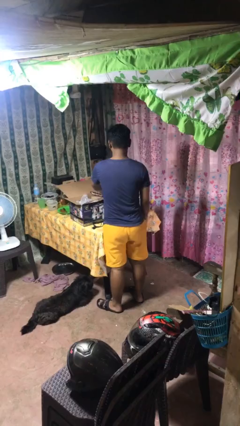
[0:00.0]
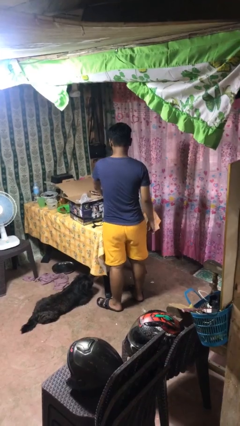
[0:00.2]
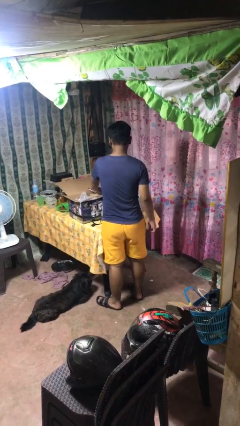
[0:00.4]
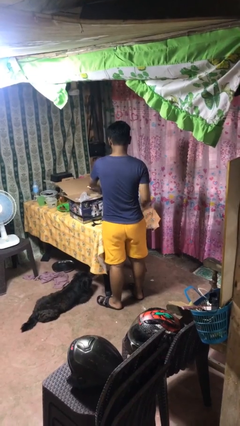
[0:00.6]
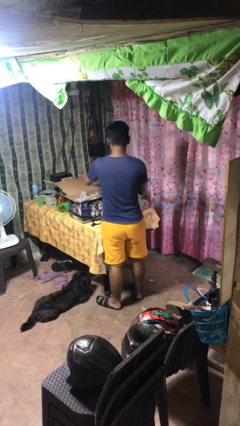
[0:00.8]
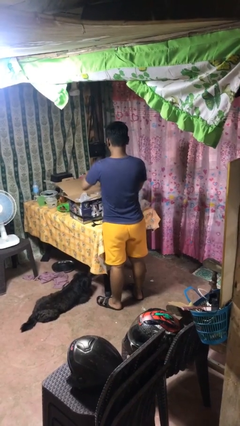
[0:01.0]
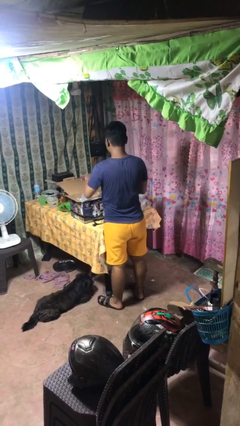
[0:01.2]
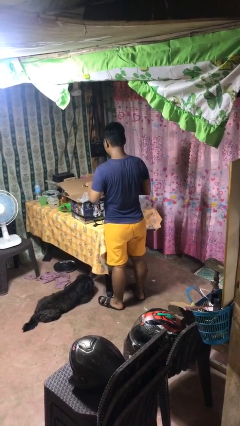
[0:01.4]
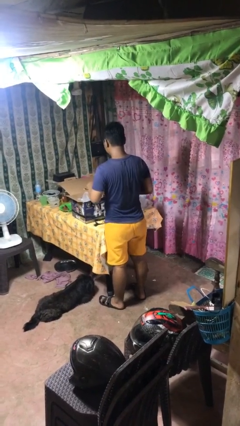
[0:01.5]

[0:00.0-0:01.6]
person takes object from box

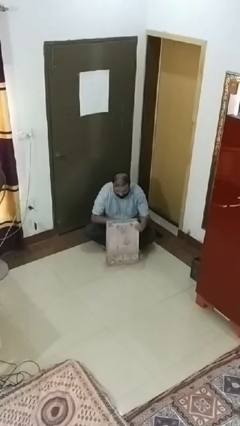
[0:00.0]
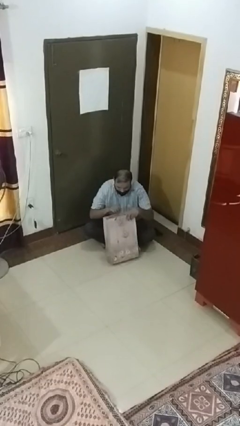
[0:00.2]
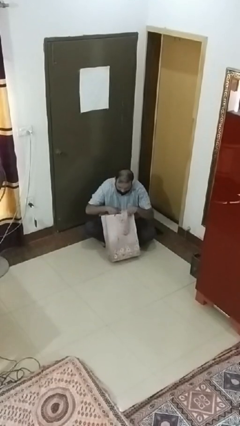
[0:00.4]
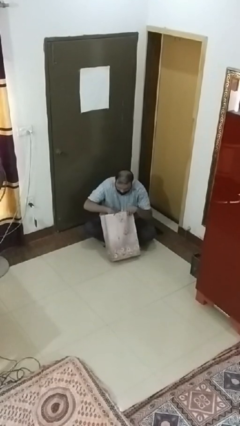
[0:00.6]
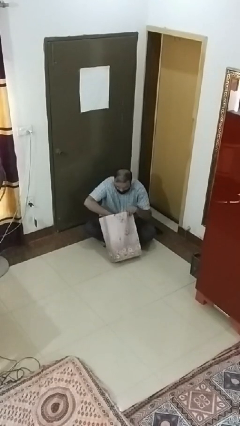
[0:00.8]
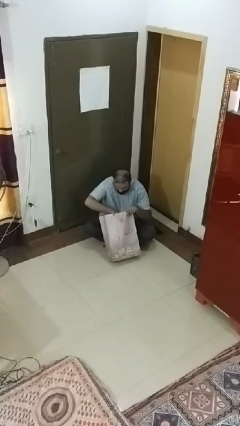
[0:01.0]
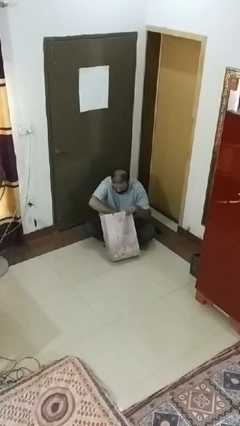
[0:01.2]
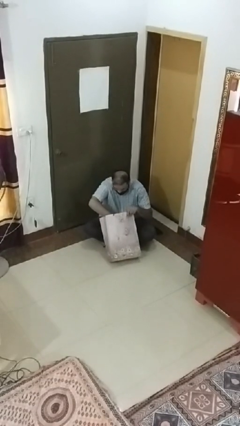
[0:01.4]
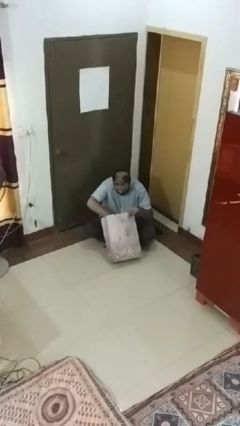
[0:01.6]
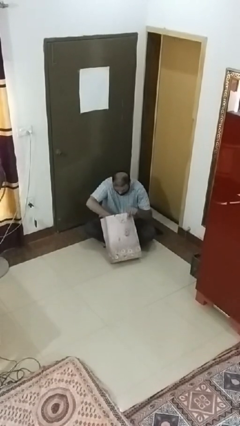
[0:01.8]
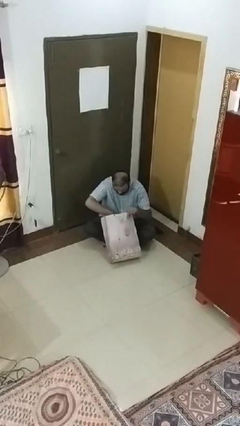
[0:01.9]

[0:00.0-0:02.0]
person searches under bed

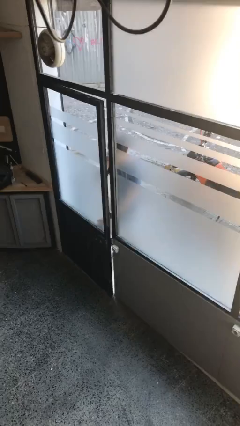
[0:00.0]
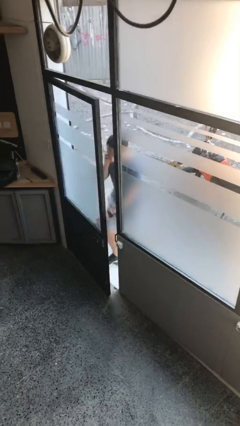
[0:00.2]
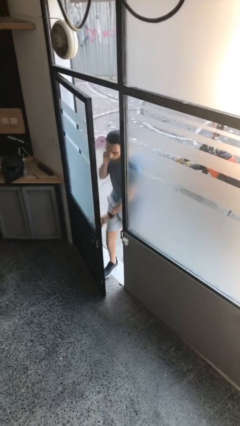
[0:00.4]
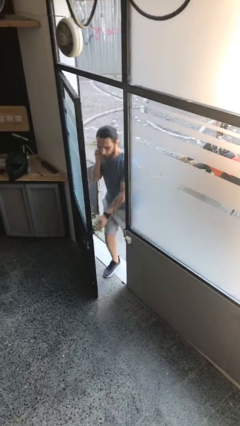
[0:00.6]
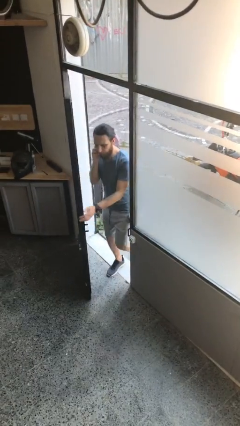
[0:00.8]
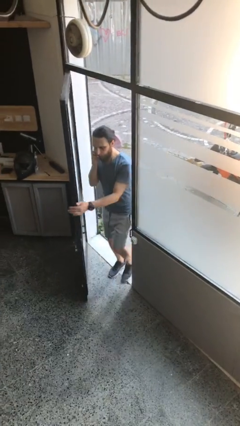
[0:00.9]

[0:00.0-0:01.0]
person opens facility door

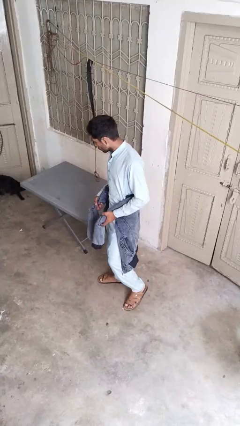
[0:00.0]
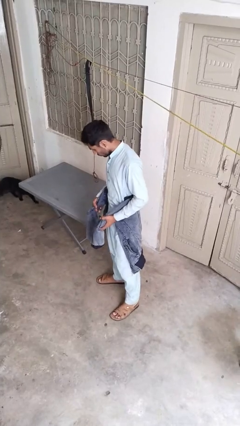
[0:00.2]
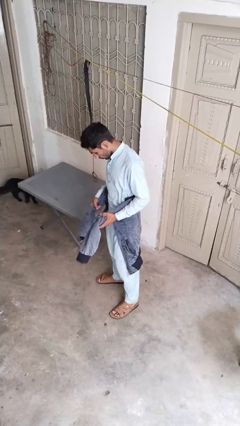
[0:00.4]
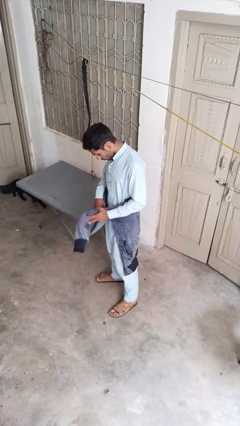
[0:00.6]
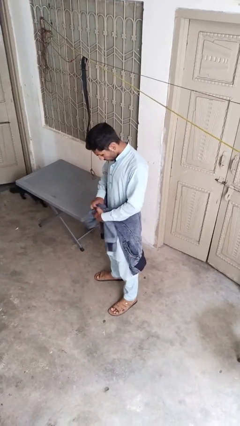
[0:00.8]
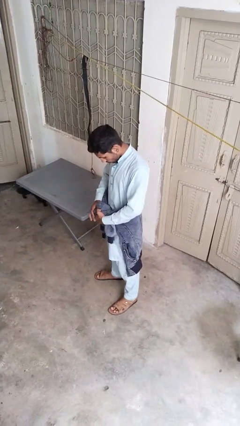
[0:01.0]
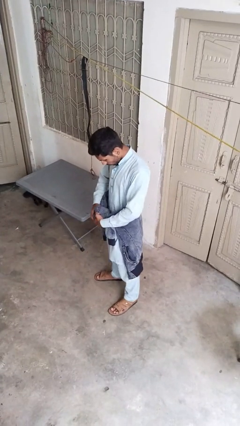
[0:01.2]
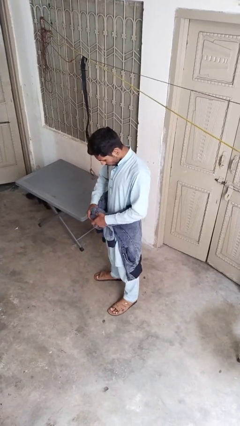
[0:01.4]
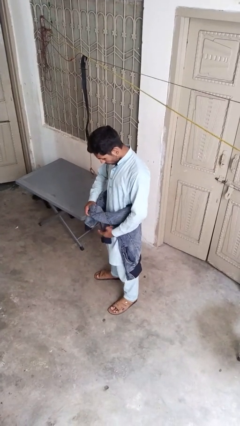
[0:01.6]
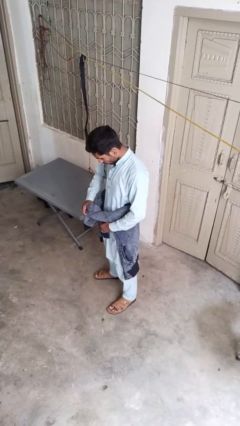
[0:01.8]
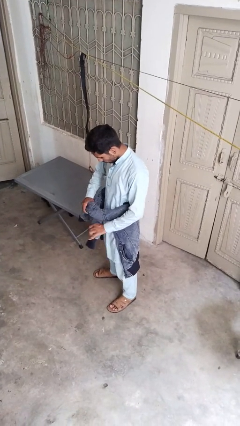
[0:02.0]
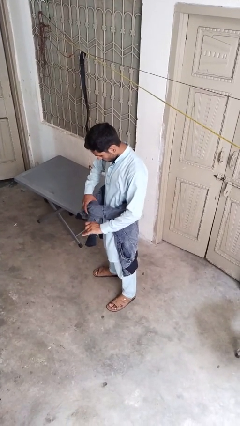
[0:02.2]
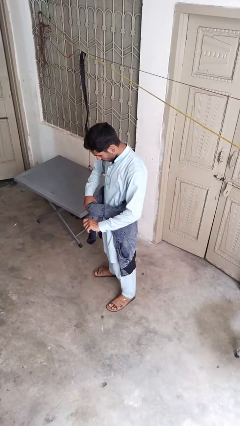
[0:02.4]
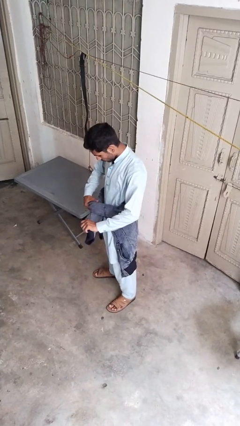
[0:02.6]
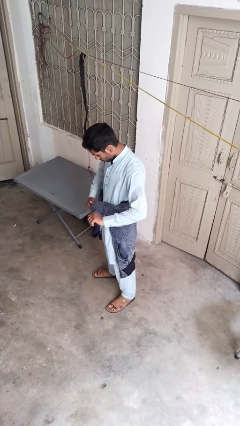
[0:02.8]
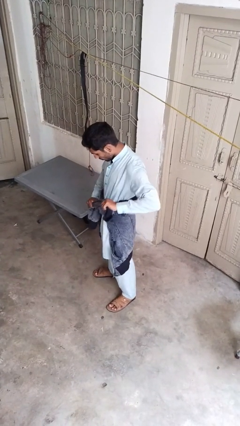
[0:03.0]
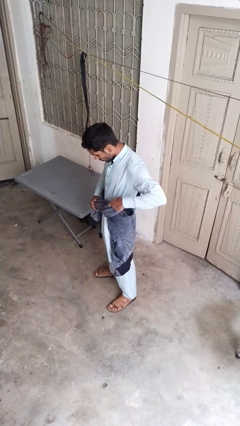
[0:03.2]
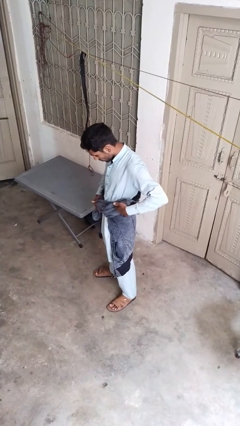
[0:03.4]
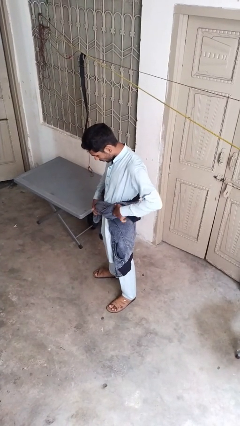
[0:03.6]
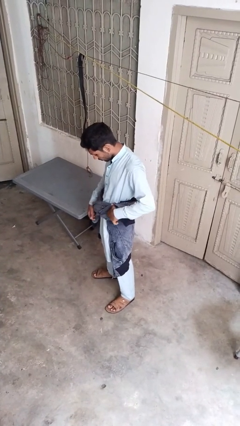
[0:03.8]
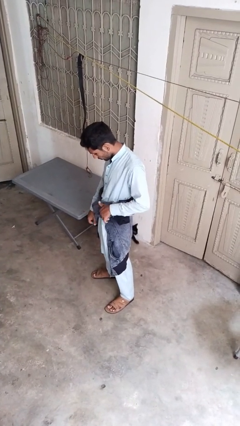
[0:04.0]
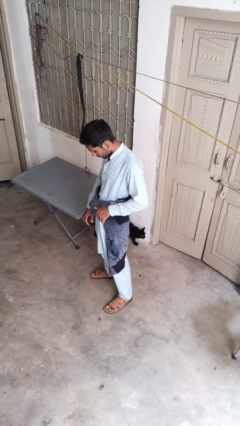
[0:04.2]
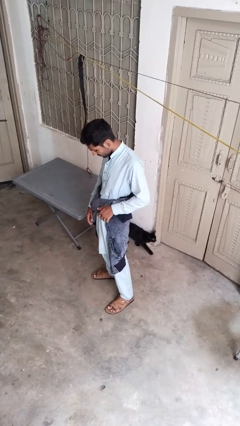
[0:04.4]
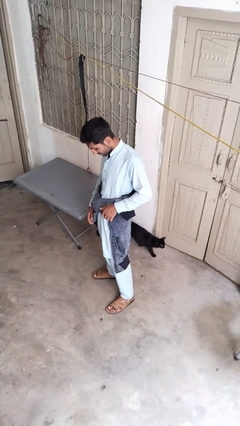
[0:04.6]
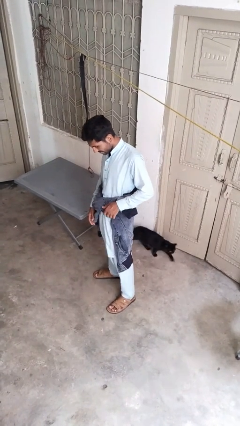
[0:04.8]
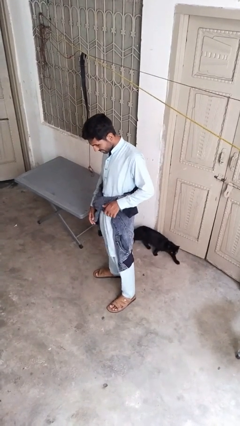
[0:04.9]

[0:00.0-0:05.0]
person ties jacket around waist

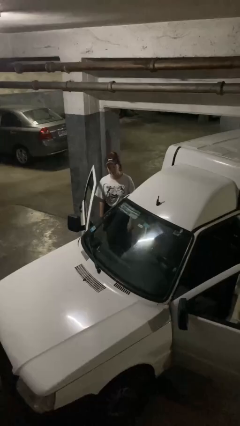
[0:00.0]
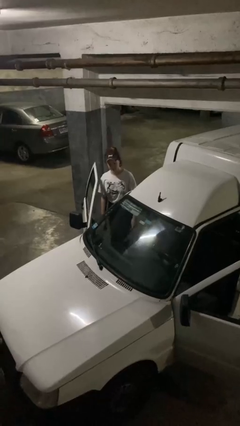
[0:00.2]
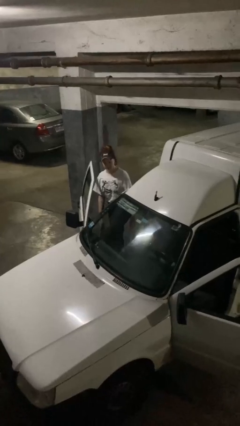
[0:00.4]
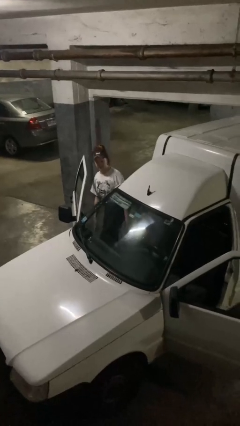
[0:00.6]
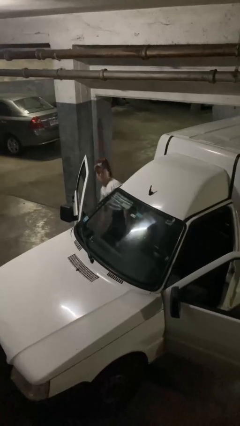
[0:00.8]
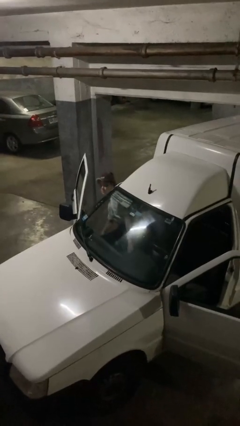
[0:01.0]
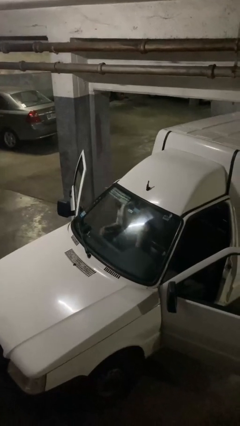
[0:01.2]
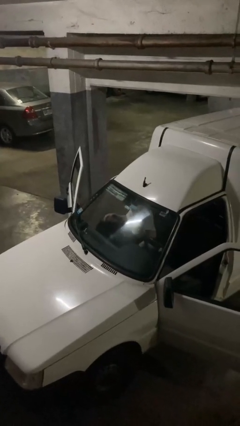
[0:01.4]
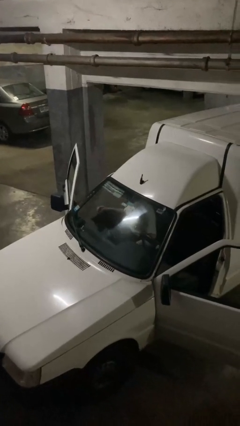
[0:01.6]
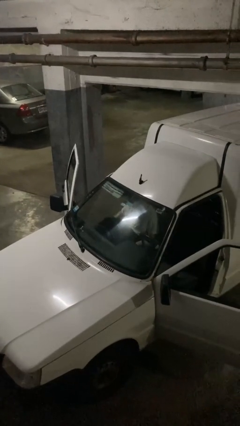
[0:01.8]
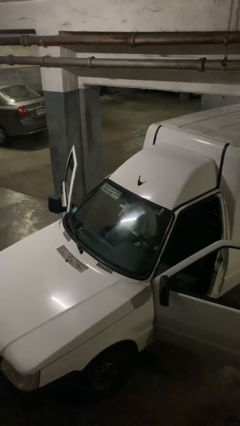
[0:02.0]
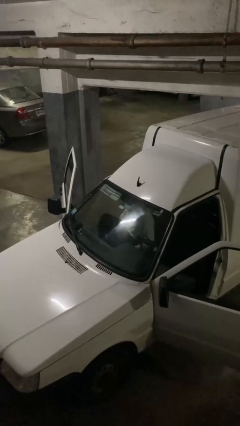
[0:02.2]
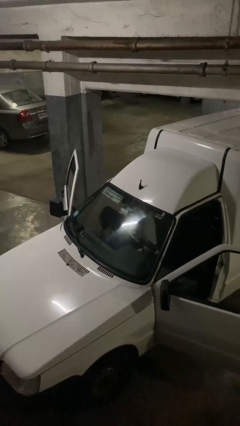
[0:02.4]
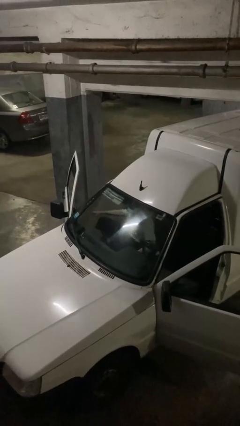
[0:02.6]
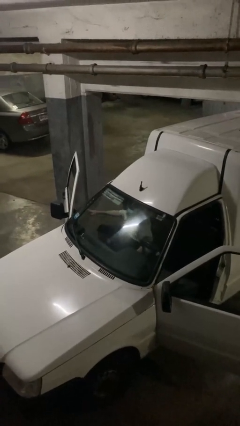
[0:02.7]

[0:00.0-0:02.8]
person enters car

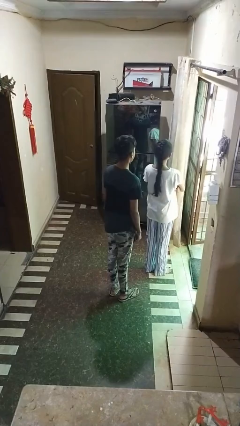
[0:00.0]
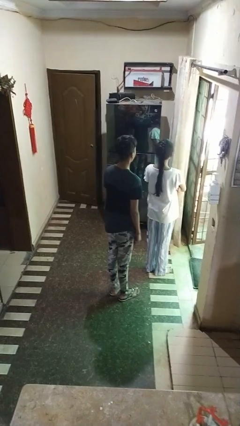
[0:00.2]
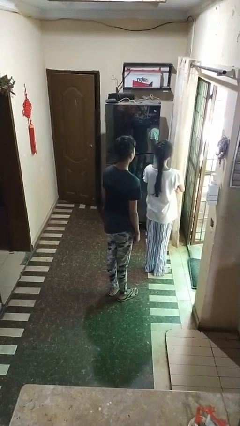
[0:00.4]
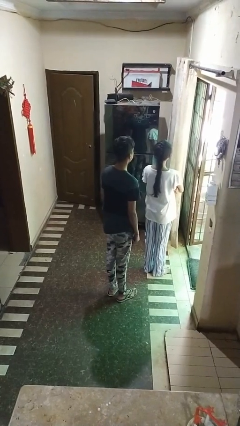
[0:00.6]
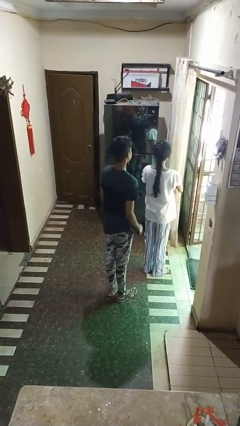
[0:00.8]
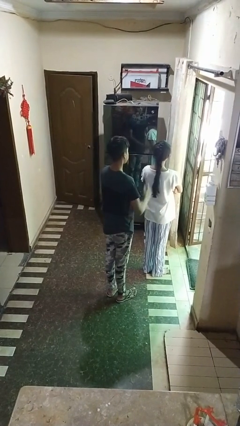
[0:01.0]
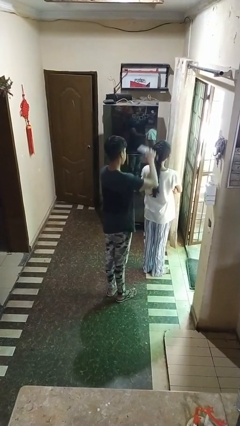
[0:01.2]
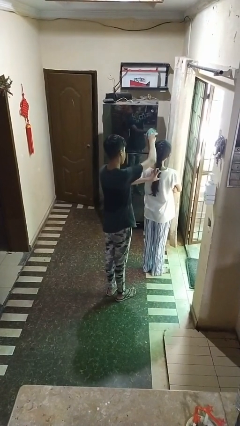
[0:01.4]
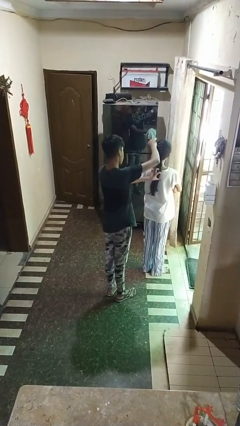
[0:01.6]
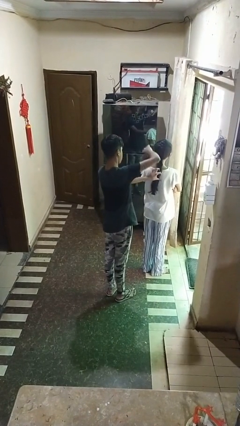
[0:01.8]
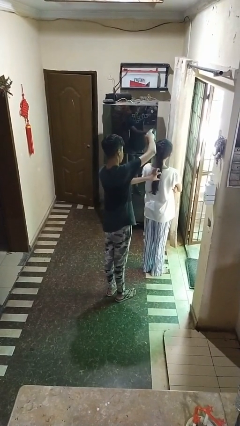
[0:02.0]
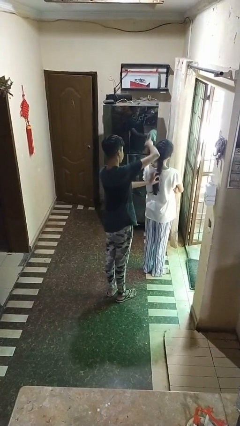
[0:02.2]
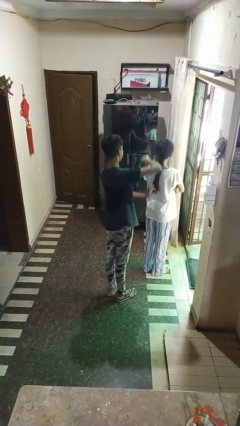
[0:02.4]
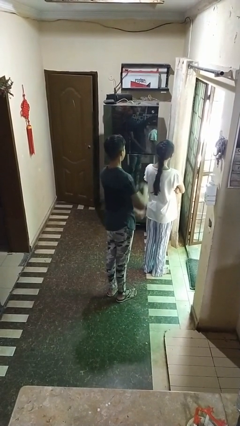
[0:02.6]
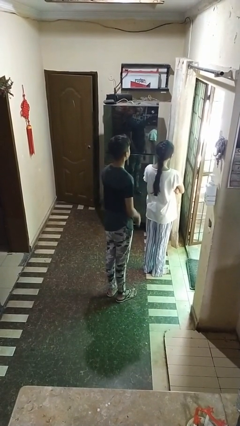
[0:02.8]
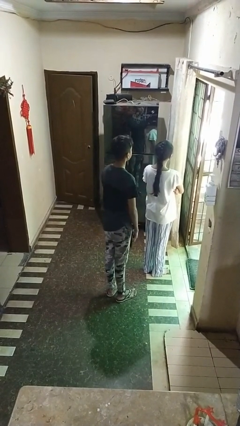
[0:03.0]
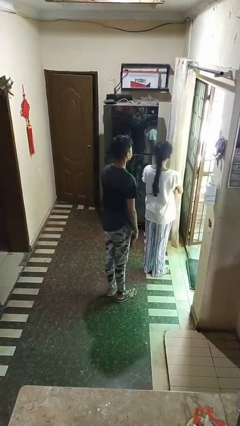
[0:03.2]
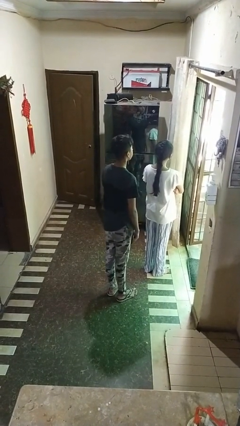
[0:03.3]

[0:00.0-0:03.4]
person brushes hair of person

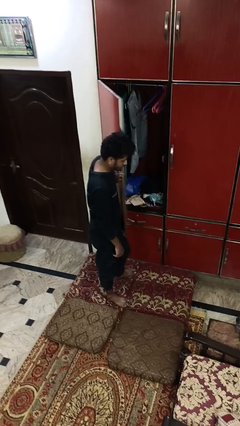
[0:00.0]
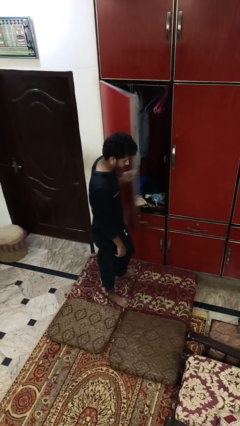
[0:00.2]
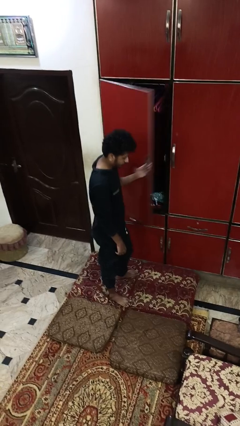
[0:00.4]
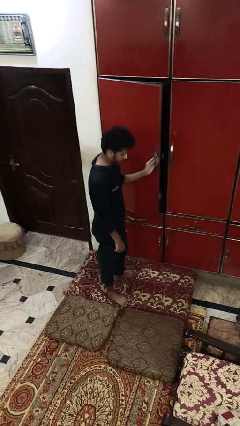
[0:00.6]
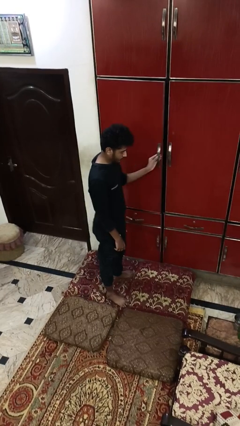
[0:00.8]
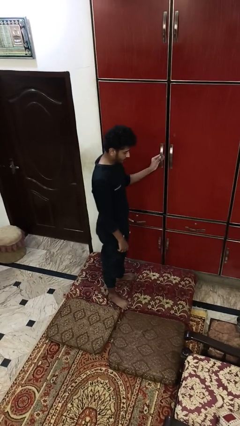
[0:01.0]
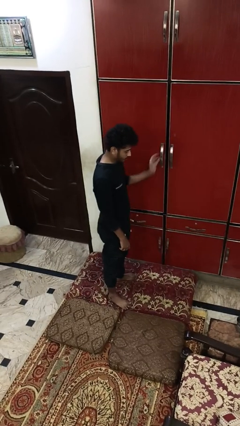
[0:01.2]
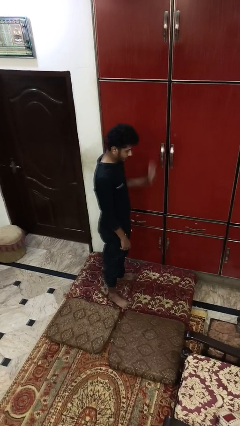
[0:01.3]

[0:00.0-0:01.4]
person closes closet door
